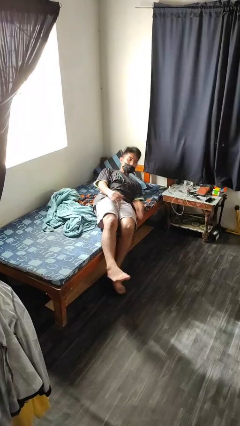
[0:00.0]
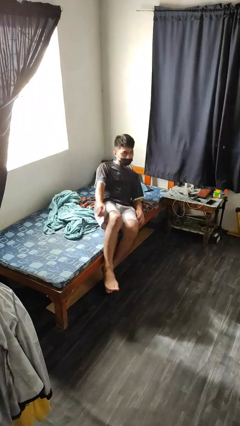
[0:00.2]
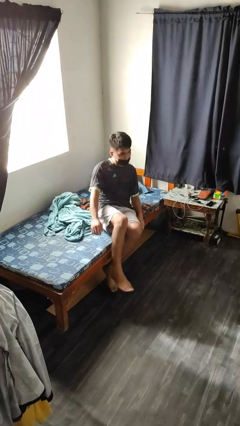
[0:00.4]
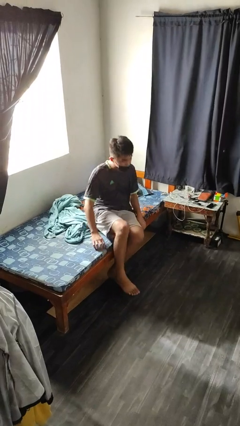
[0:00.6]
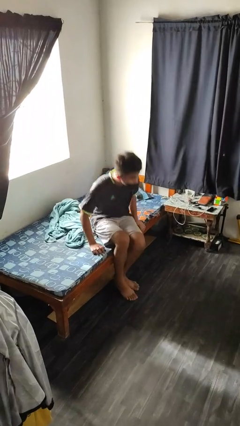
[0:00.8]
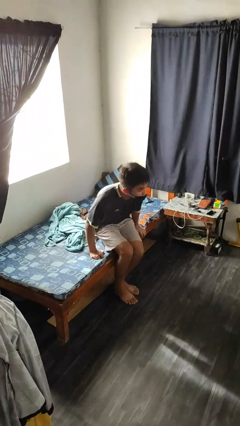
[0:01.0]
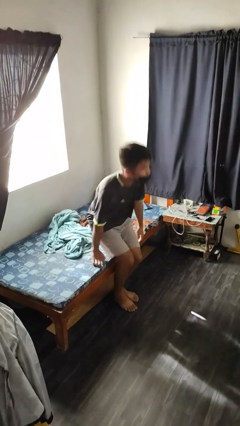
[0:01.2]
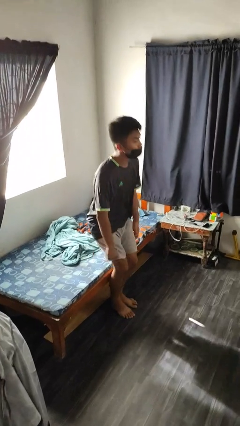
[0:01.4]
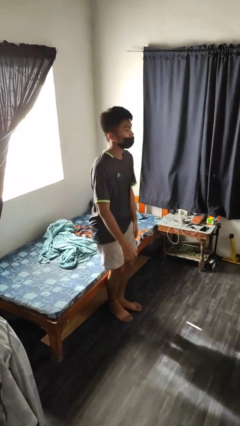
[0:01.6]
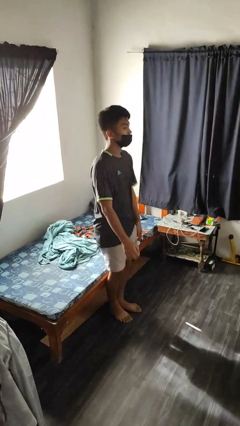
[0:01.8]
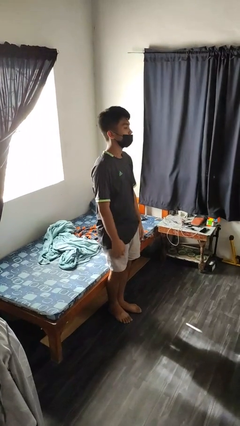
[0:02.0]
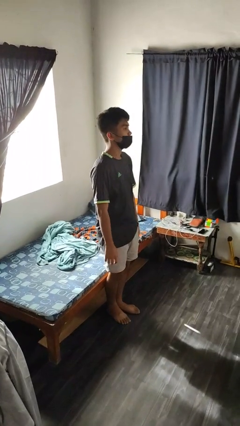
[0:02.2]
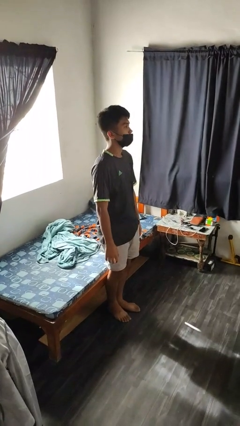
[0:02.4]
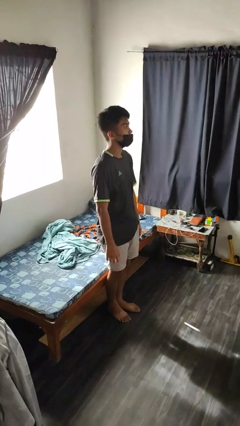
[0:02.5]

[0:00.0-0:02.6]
person stands up

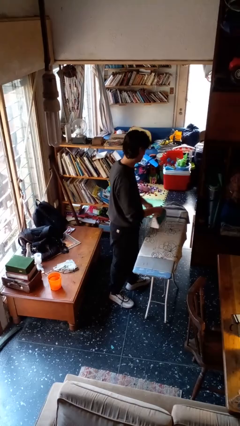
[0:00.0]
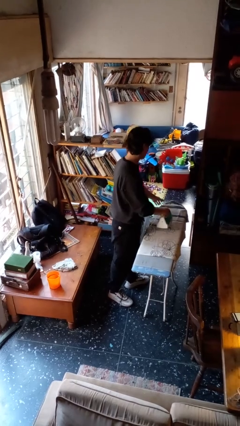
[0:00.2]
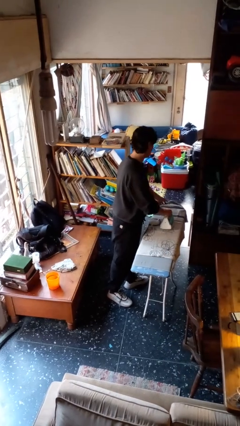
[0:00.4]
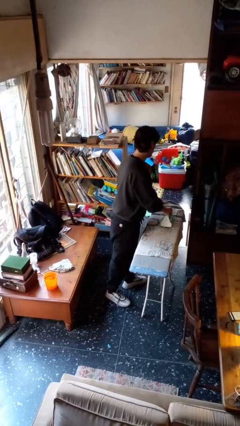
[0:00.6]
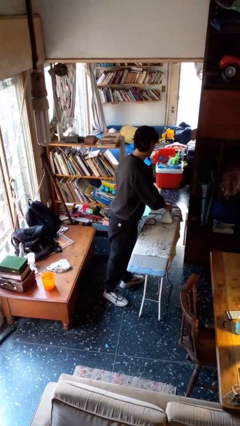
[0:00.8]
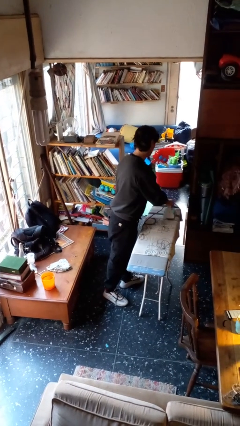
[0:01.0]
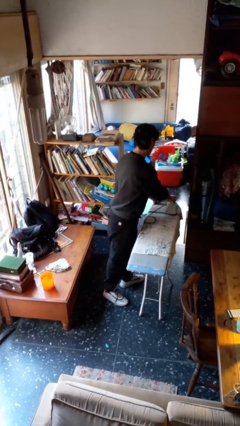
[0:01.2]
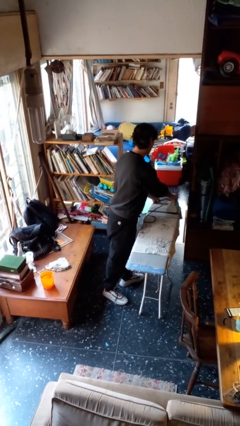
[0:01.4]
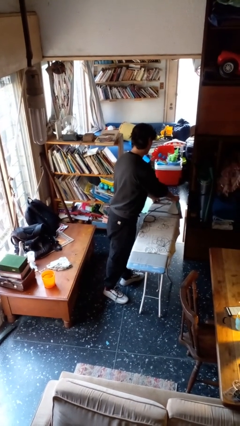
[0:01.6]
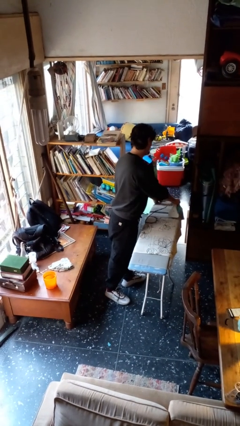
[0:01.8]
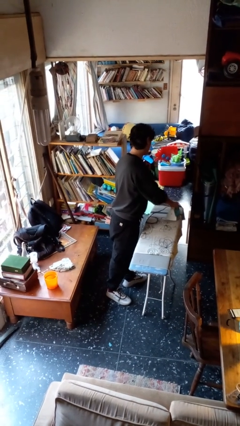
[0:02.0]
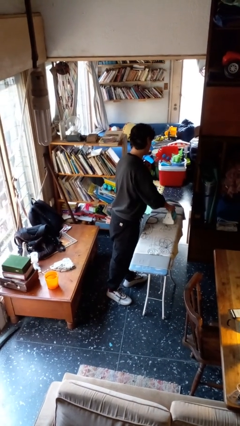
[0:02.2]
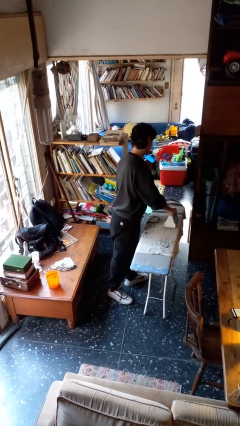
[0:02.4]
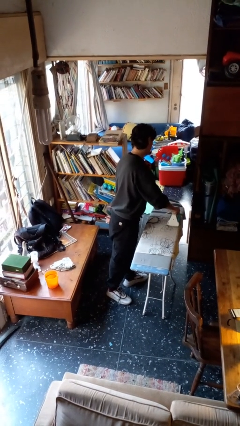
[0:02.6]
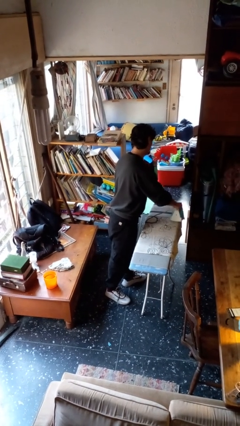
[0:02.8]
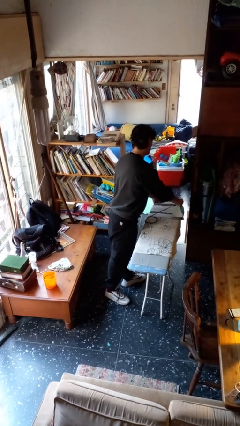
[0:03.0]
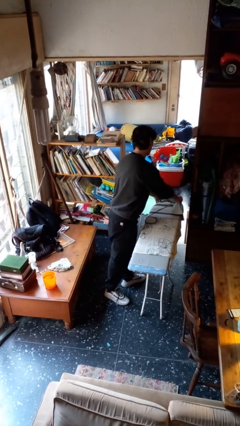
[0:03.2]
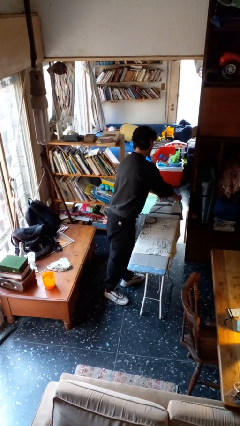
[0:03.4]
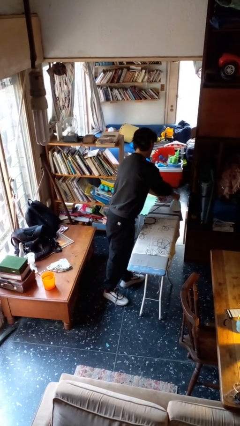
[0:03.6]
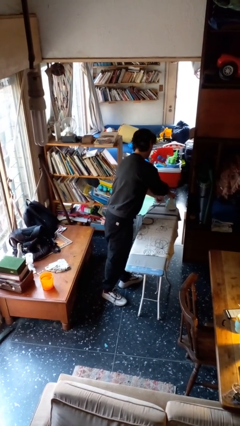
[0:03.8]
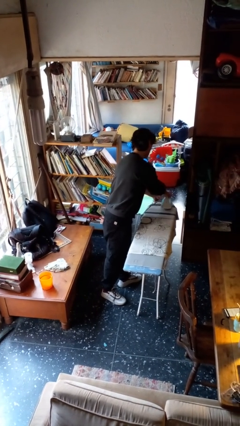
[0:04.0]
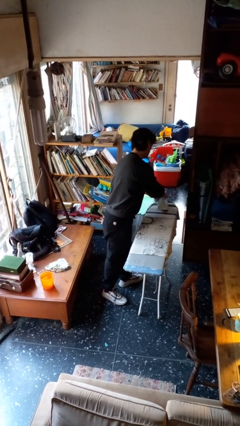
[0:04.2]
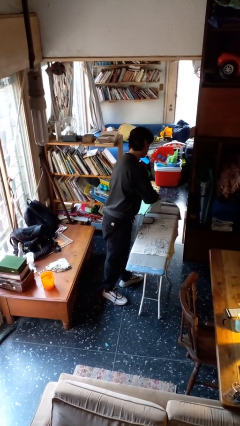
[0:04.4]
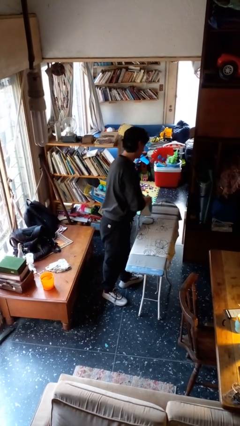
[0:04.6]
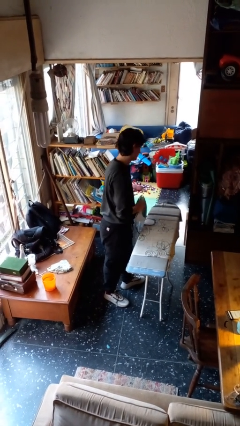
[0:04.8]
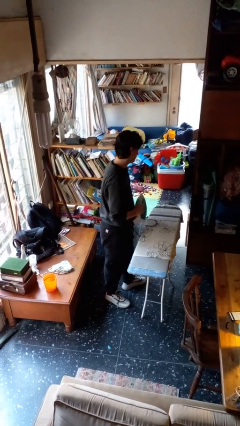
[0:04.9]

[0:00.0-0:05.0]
person irons clothes

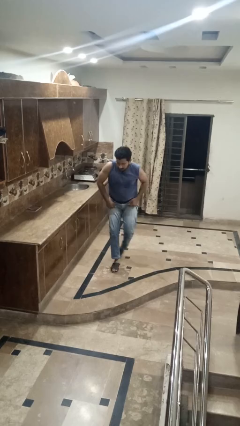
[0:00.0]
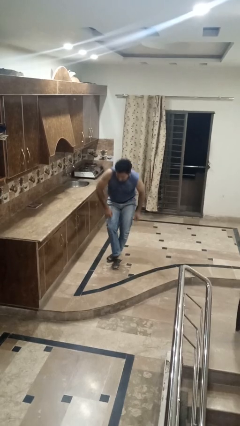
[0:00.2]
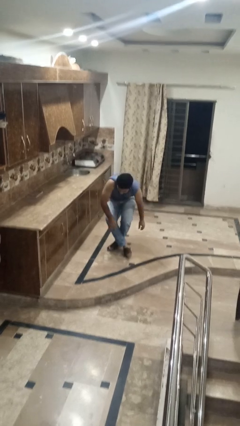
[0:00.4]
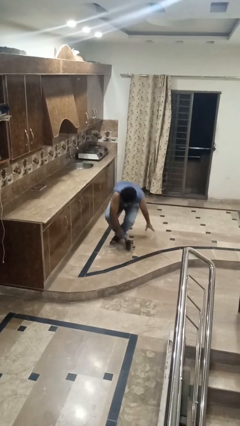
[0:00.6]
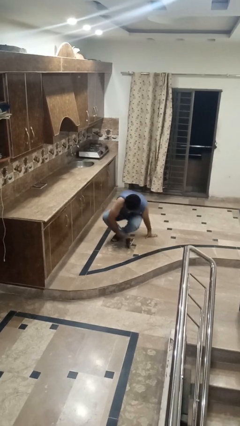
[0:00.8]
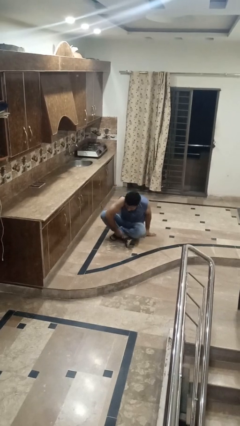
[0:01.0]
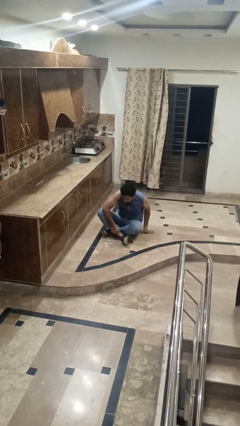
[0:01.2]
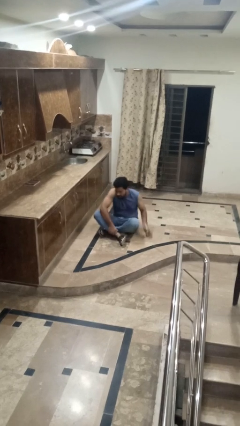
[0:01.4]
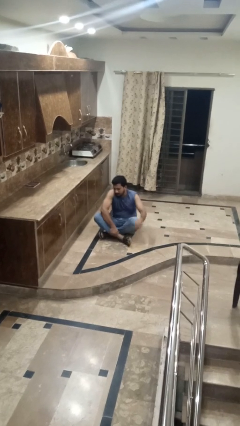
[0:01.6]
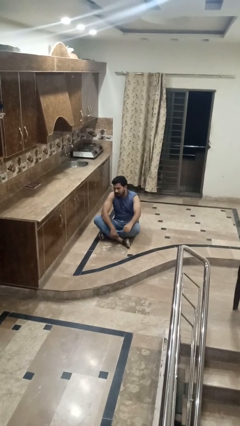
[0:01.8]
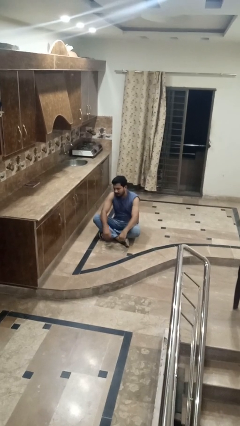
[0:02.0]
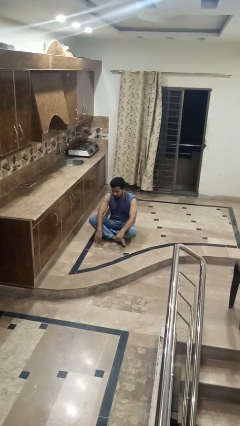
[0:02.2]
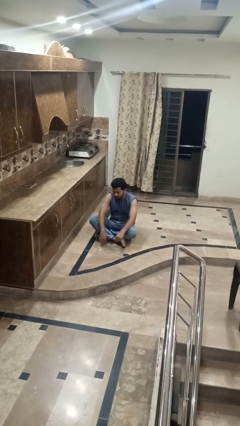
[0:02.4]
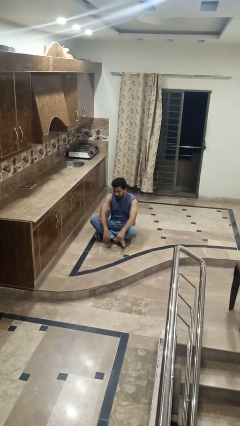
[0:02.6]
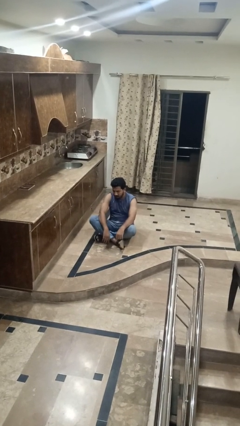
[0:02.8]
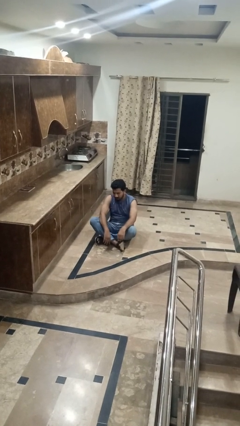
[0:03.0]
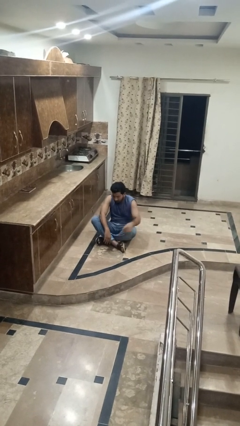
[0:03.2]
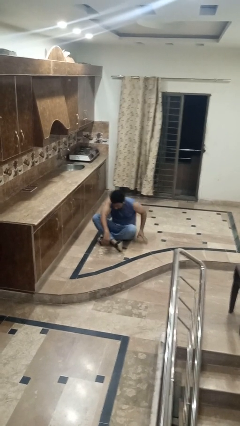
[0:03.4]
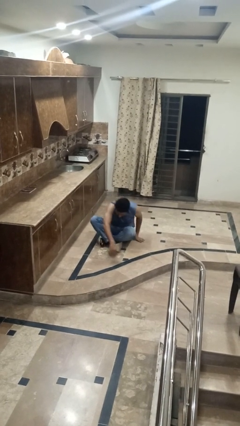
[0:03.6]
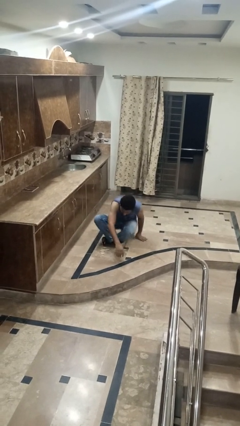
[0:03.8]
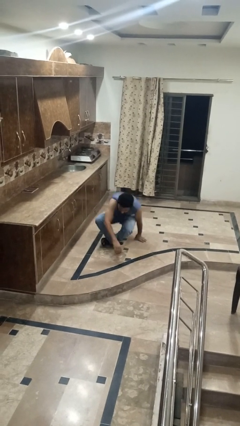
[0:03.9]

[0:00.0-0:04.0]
person sits crisscross

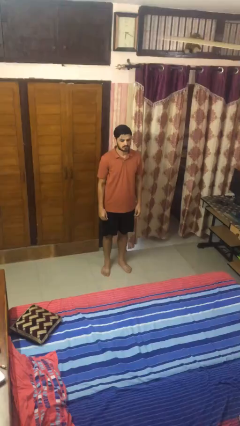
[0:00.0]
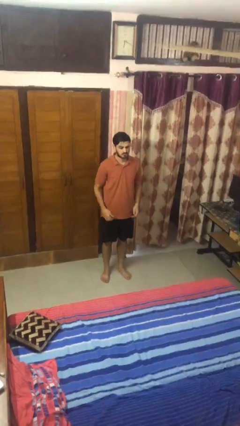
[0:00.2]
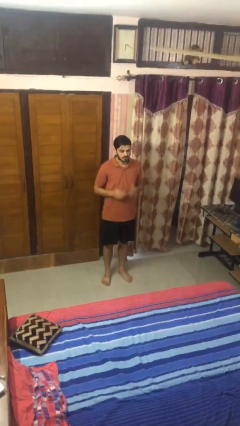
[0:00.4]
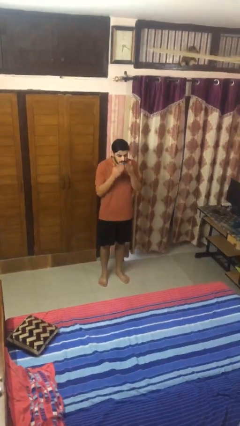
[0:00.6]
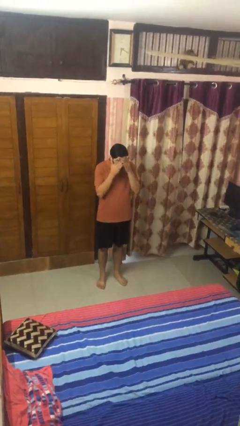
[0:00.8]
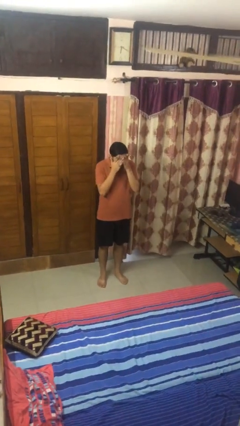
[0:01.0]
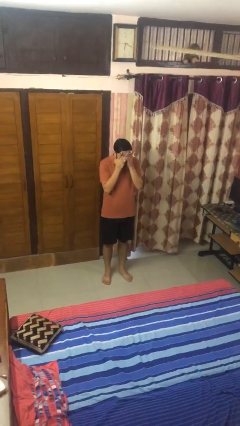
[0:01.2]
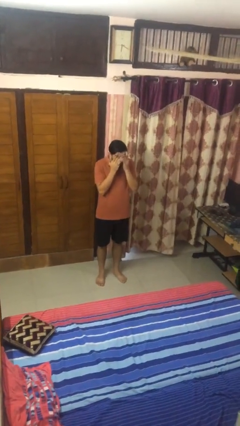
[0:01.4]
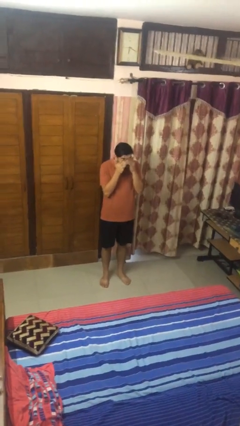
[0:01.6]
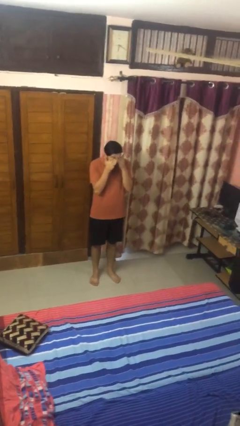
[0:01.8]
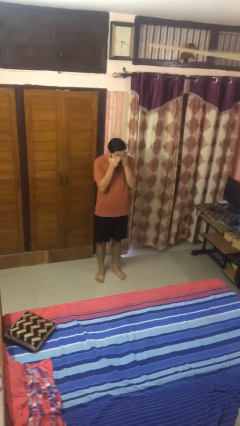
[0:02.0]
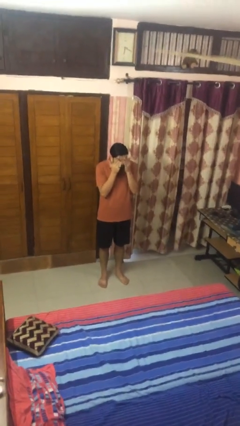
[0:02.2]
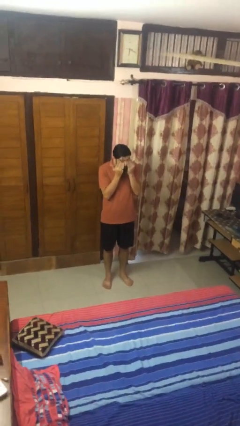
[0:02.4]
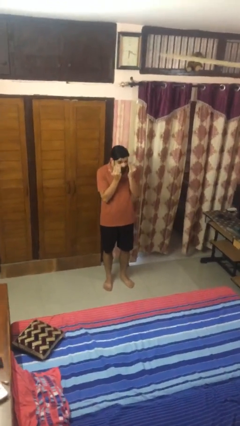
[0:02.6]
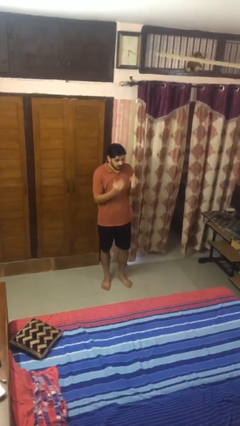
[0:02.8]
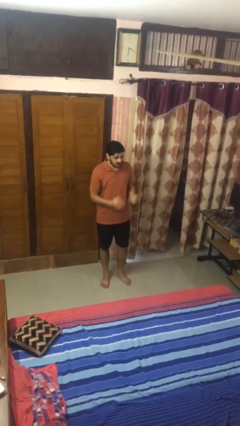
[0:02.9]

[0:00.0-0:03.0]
person rubs eyes

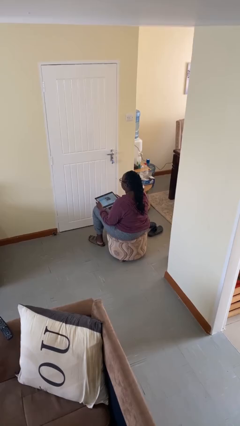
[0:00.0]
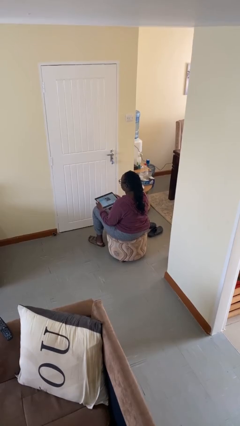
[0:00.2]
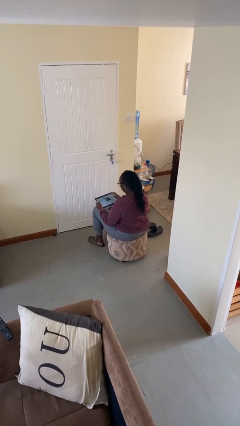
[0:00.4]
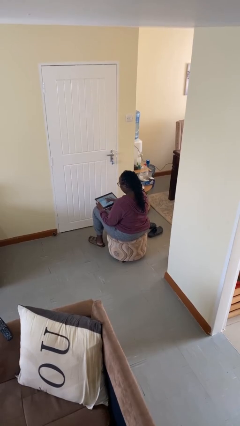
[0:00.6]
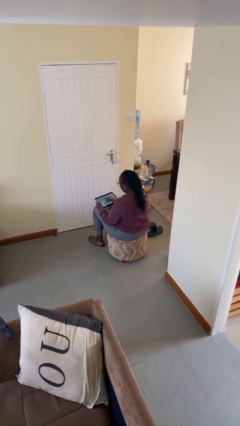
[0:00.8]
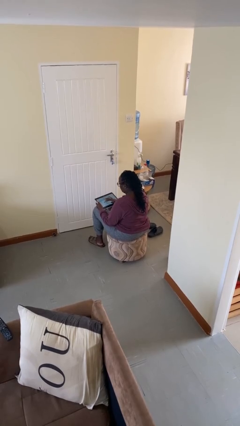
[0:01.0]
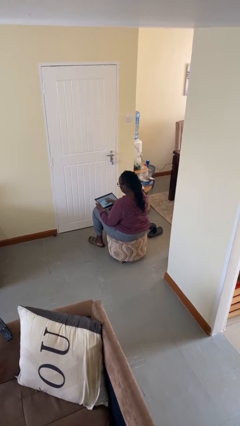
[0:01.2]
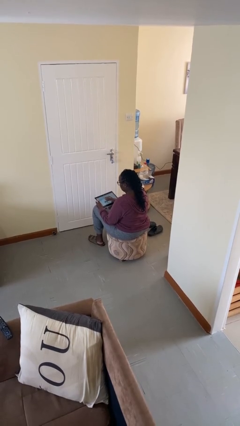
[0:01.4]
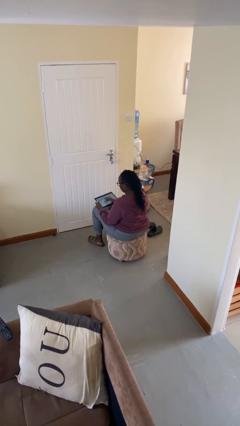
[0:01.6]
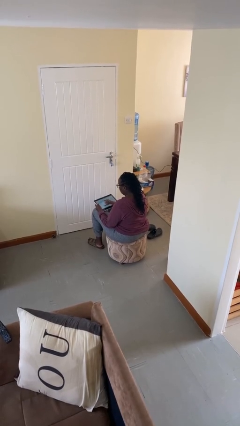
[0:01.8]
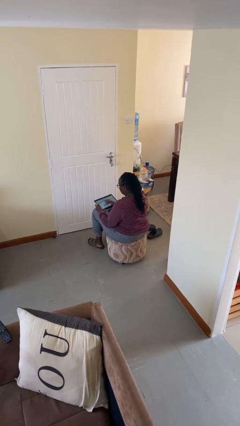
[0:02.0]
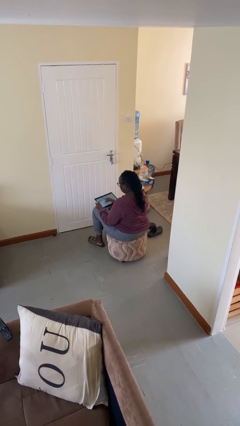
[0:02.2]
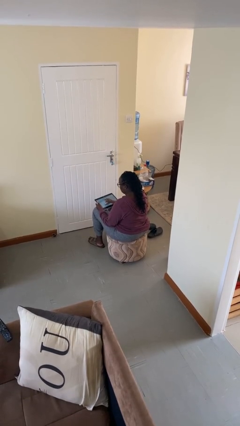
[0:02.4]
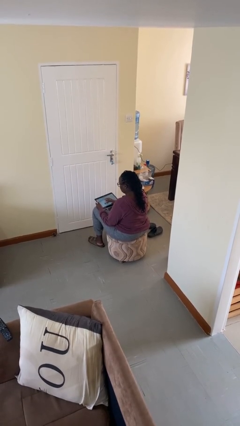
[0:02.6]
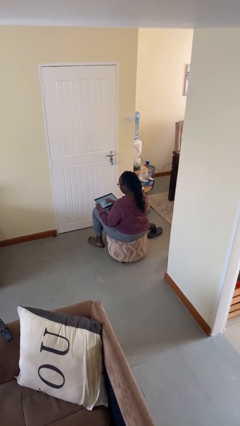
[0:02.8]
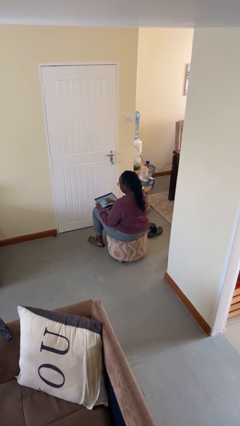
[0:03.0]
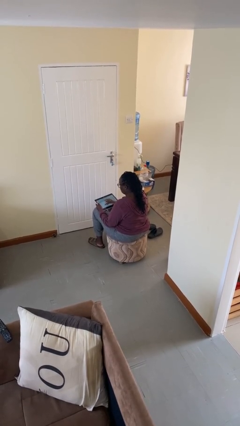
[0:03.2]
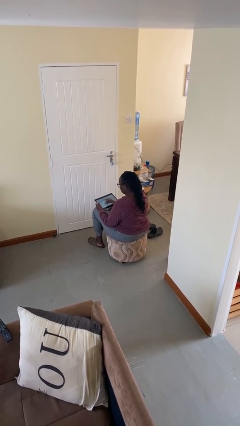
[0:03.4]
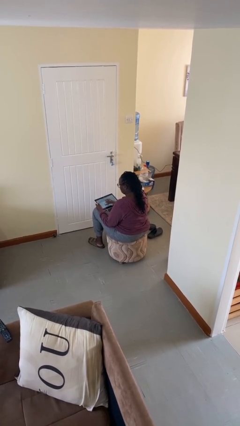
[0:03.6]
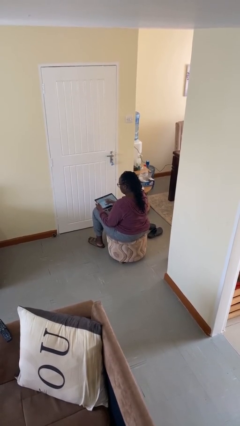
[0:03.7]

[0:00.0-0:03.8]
person interacts with tablet
